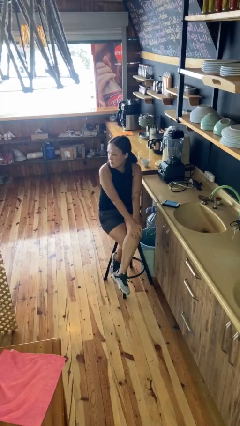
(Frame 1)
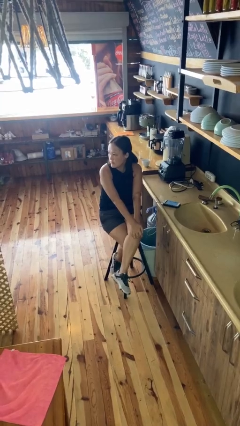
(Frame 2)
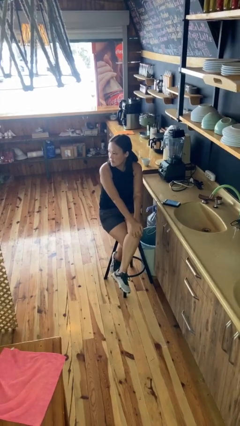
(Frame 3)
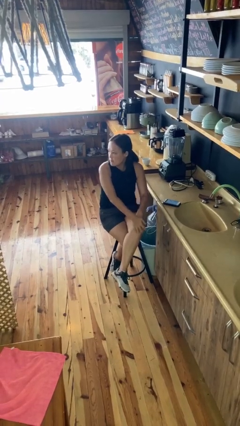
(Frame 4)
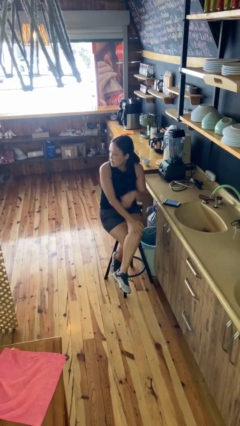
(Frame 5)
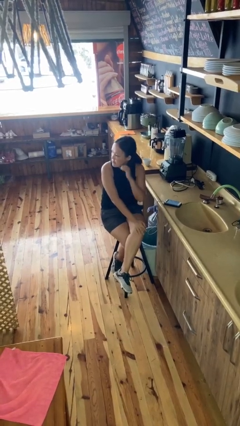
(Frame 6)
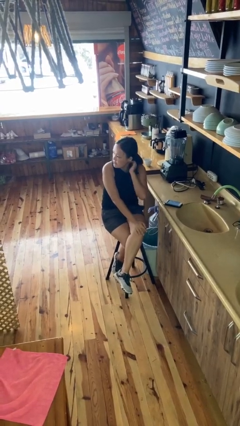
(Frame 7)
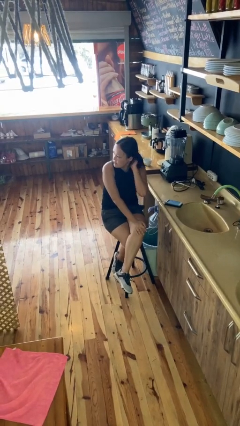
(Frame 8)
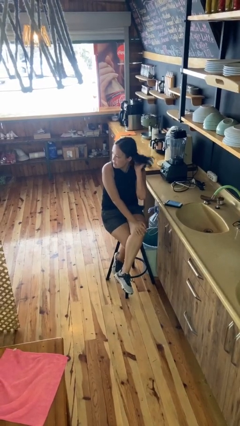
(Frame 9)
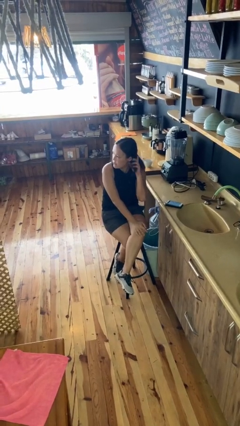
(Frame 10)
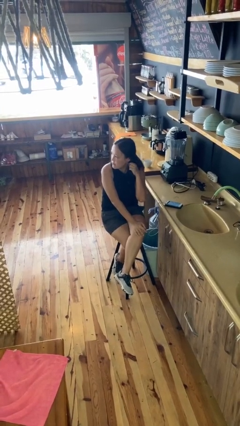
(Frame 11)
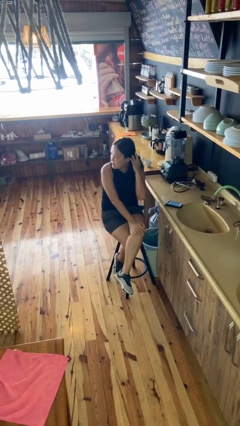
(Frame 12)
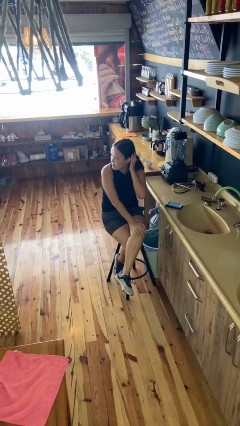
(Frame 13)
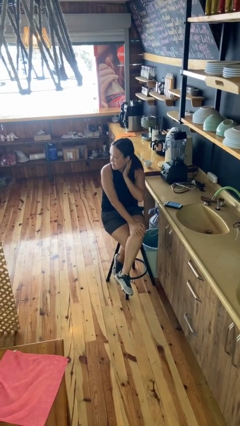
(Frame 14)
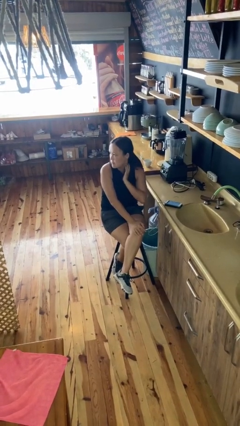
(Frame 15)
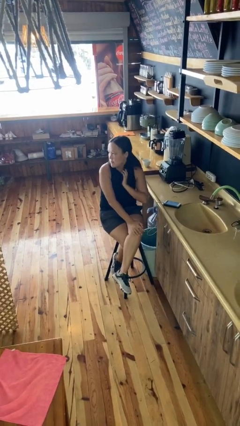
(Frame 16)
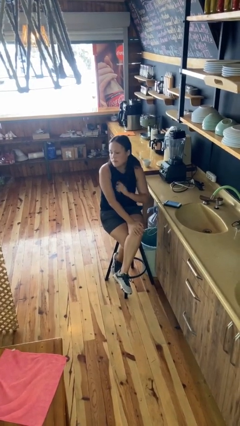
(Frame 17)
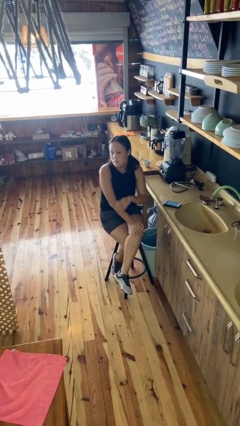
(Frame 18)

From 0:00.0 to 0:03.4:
person strokes hair

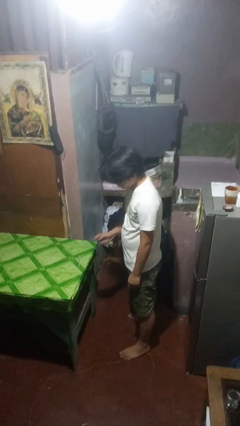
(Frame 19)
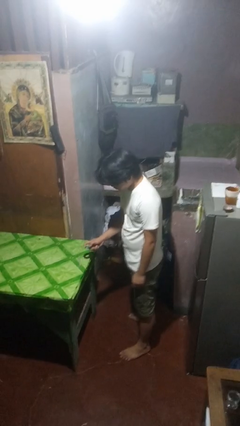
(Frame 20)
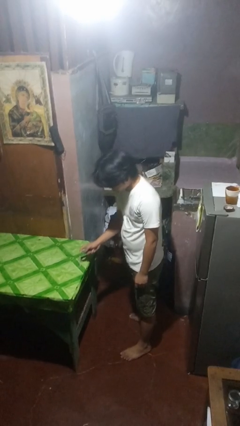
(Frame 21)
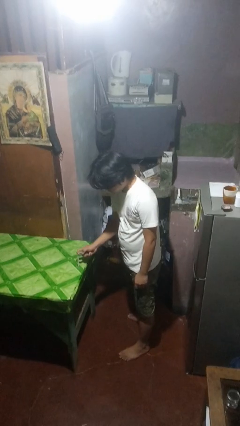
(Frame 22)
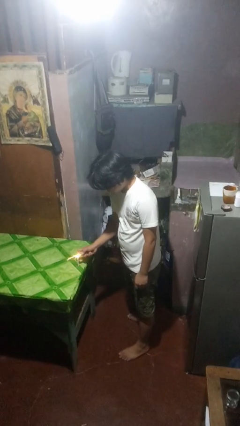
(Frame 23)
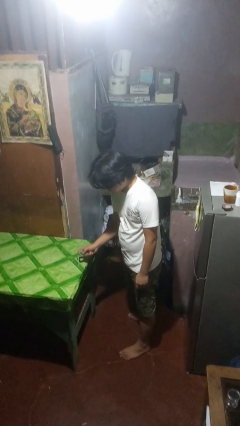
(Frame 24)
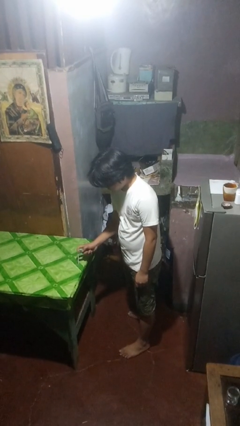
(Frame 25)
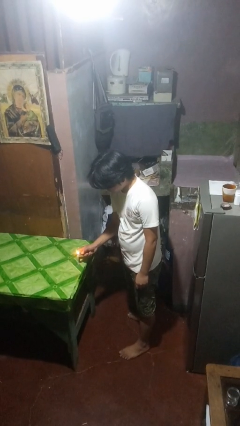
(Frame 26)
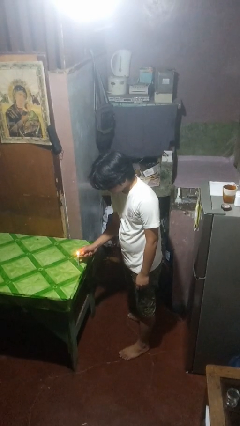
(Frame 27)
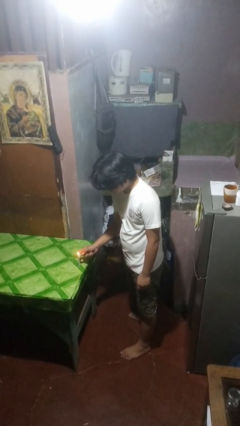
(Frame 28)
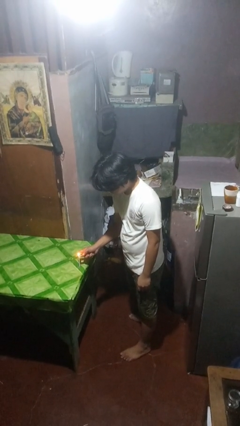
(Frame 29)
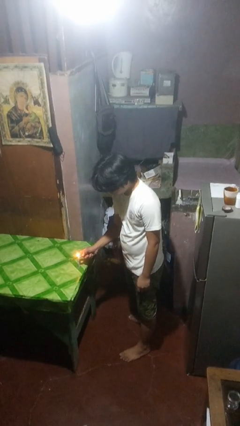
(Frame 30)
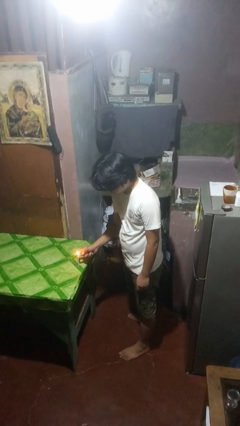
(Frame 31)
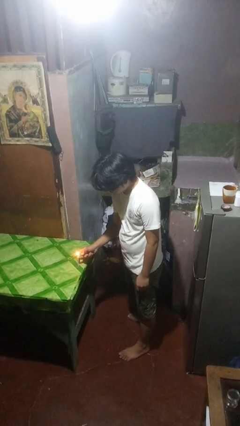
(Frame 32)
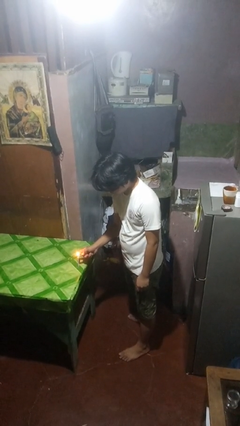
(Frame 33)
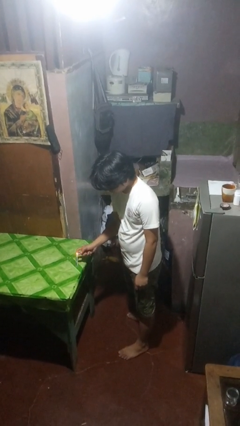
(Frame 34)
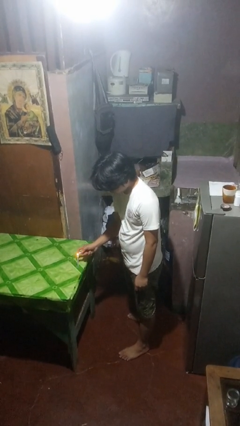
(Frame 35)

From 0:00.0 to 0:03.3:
person lights candle

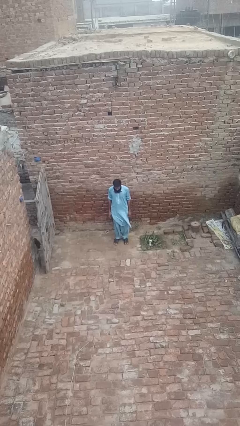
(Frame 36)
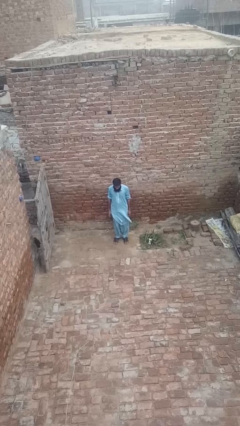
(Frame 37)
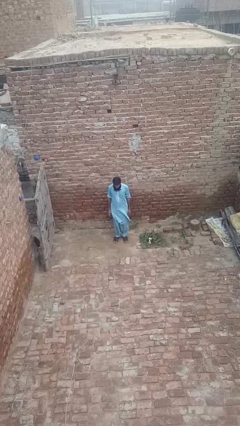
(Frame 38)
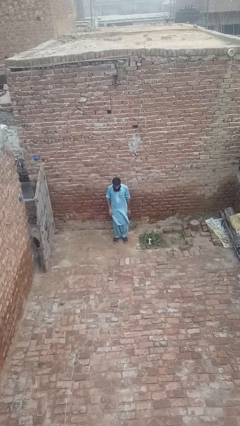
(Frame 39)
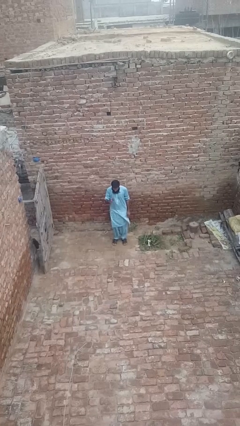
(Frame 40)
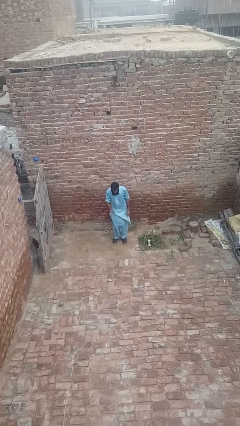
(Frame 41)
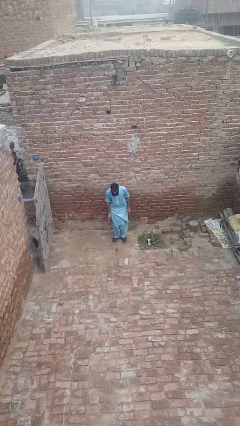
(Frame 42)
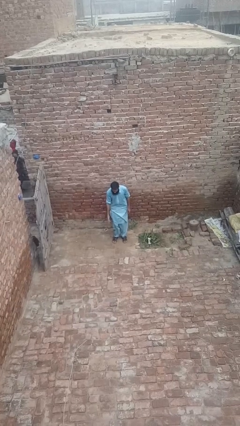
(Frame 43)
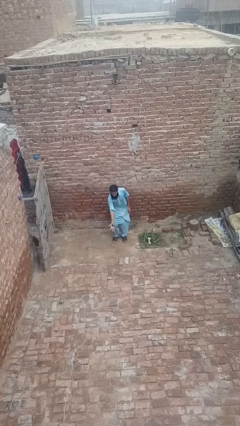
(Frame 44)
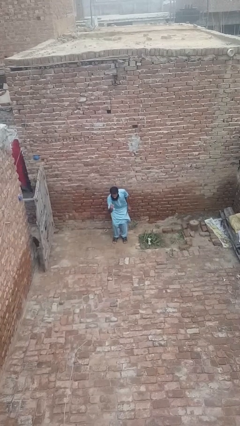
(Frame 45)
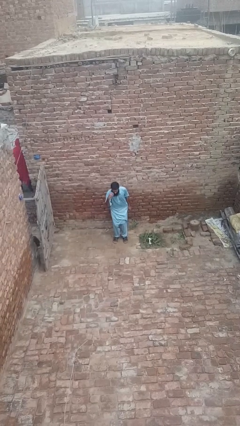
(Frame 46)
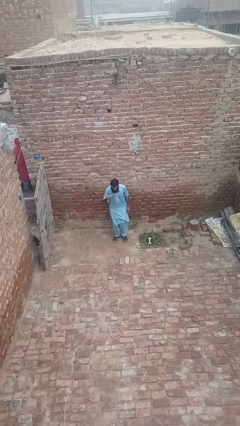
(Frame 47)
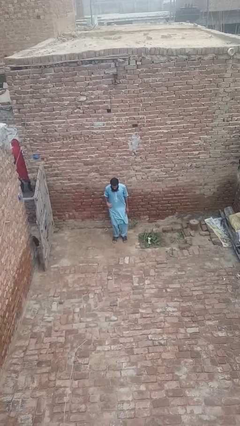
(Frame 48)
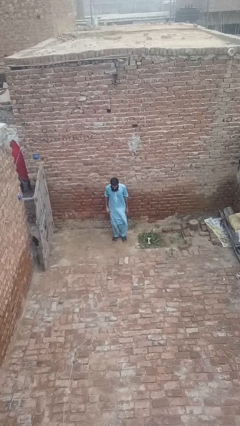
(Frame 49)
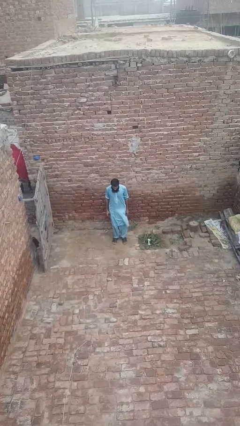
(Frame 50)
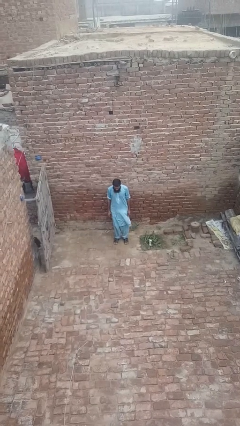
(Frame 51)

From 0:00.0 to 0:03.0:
person bounces ball on floor

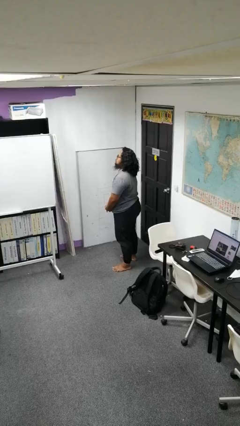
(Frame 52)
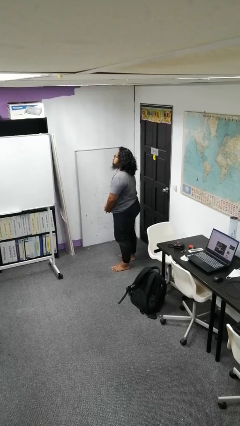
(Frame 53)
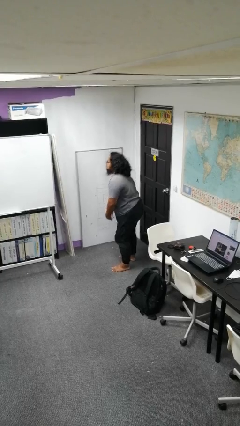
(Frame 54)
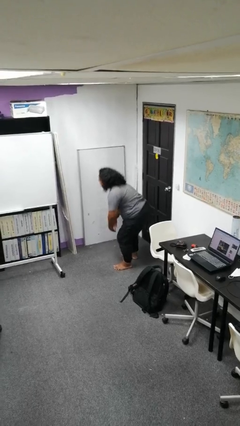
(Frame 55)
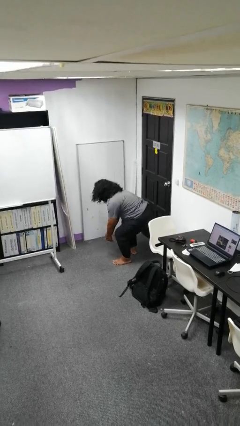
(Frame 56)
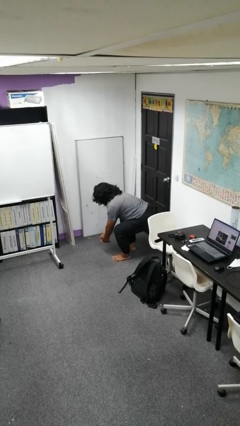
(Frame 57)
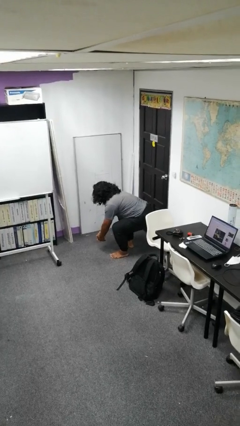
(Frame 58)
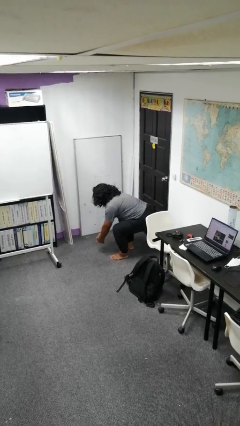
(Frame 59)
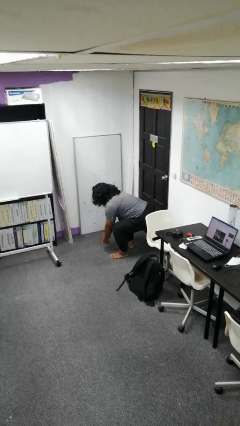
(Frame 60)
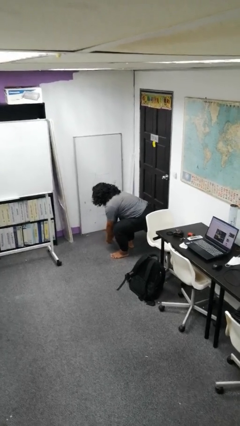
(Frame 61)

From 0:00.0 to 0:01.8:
person squats

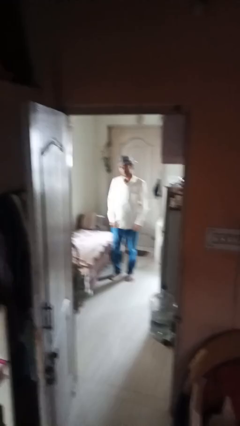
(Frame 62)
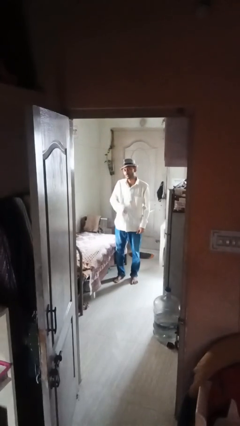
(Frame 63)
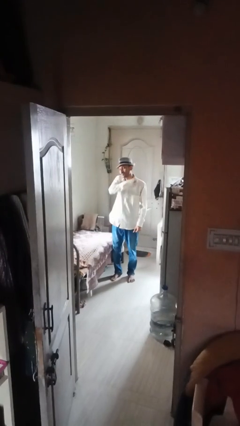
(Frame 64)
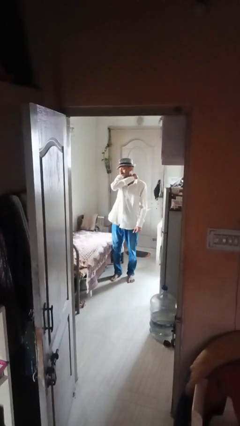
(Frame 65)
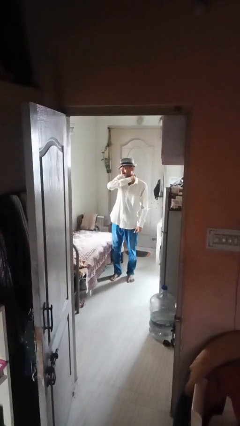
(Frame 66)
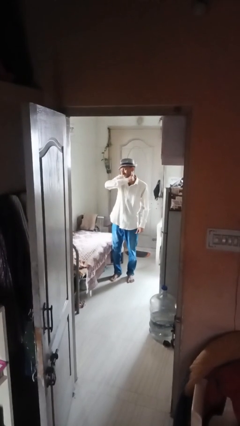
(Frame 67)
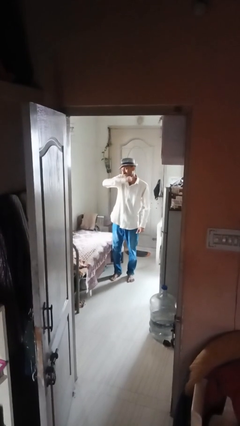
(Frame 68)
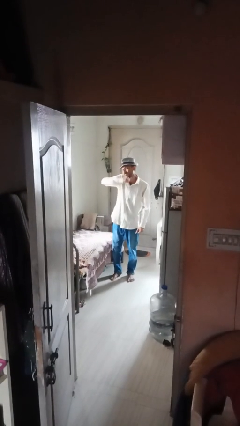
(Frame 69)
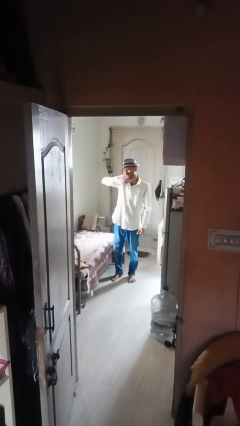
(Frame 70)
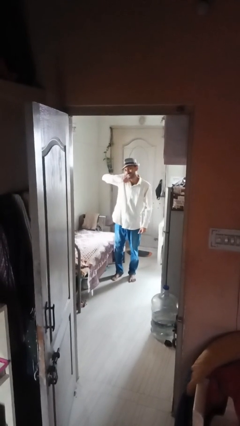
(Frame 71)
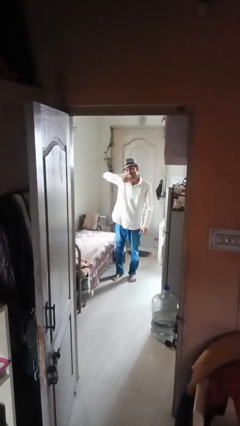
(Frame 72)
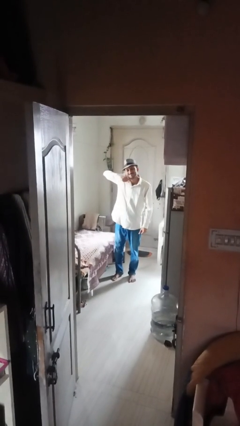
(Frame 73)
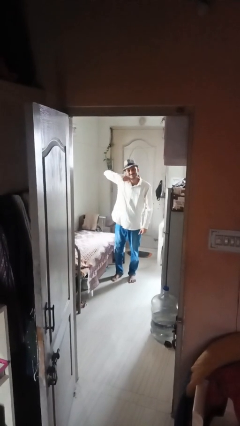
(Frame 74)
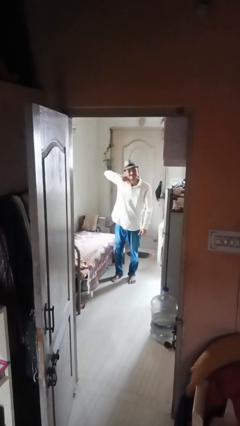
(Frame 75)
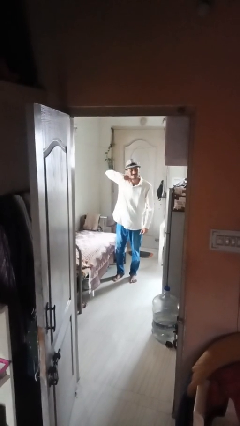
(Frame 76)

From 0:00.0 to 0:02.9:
person gestures cut

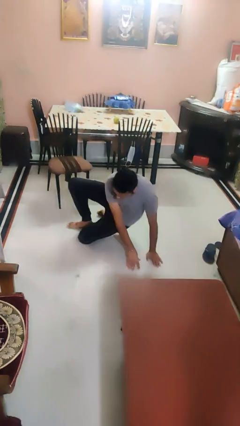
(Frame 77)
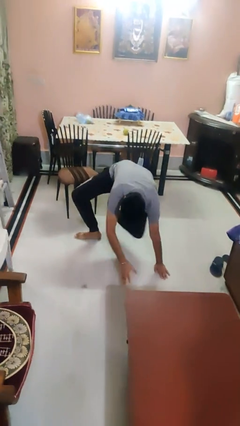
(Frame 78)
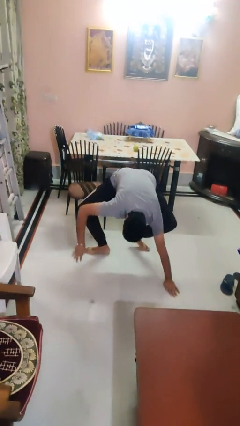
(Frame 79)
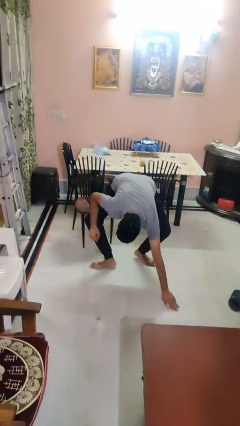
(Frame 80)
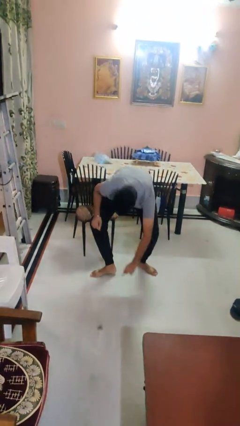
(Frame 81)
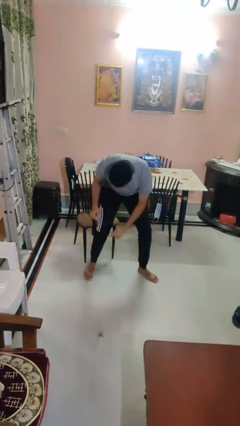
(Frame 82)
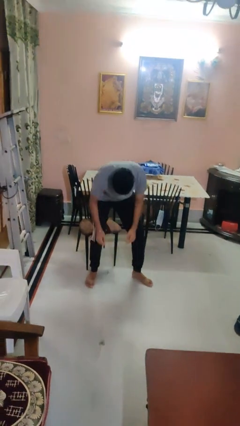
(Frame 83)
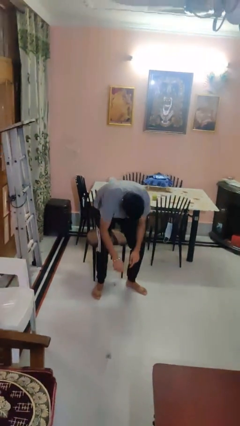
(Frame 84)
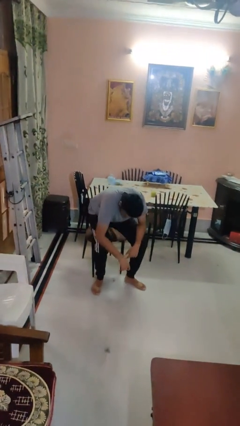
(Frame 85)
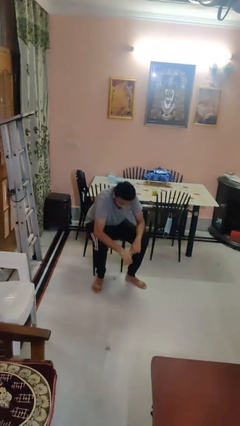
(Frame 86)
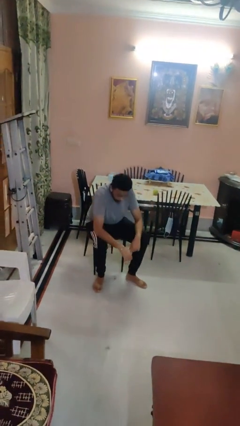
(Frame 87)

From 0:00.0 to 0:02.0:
person stands up from floor

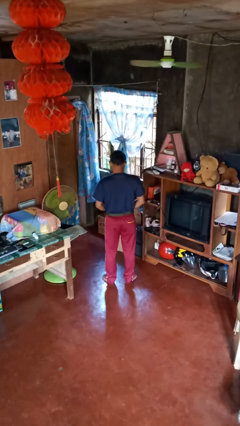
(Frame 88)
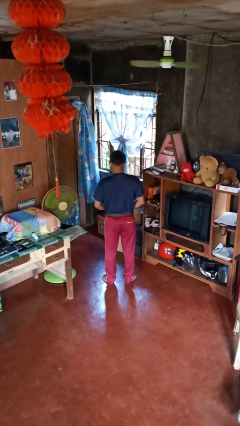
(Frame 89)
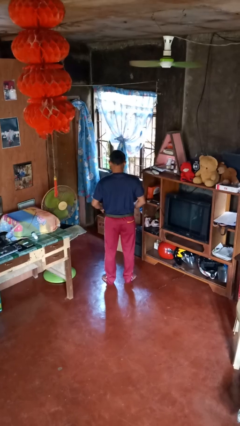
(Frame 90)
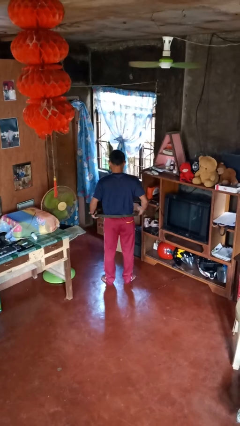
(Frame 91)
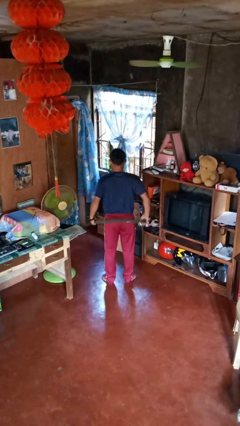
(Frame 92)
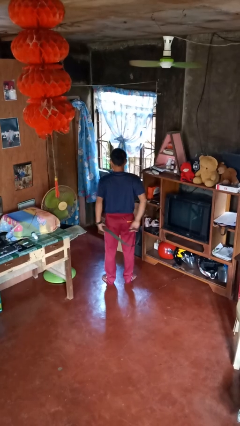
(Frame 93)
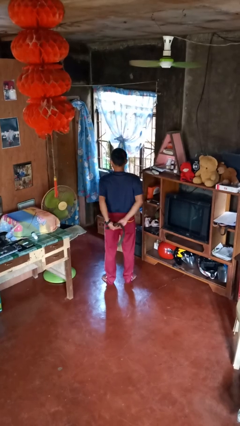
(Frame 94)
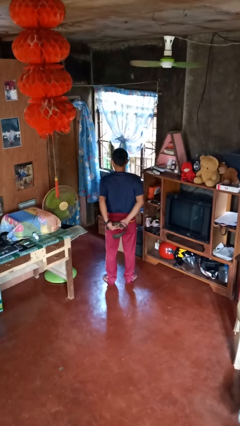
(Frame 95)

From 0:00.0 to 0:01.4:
person takes off belt
